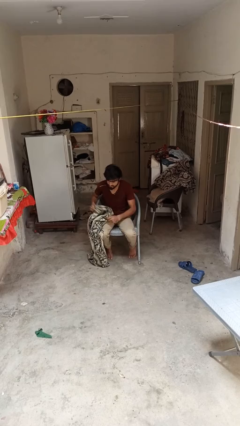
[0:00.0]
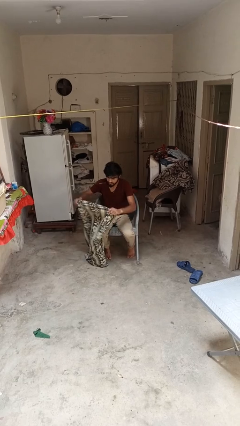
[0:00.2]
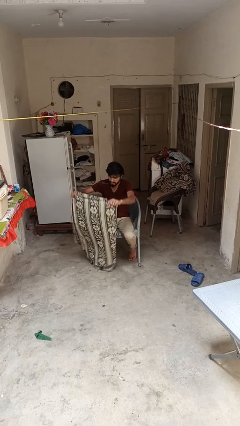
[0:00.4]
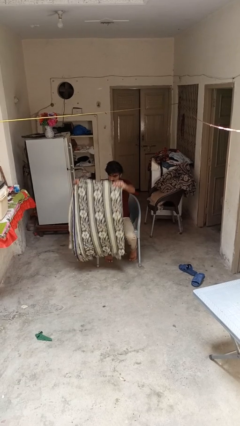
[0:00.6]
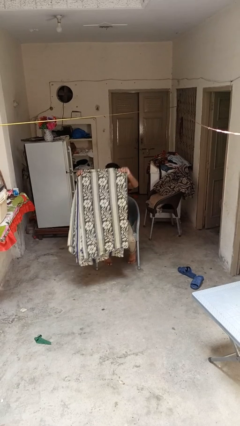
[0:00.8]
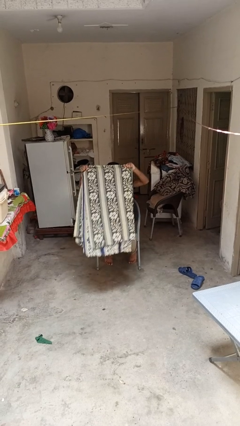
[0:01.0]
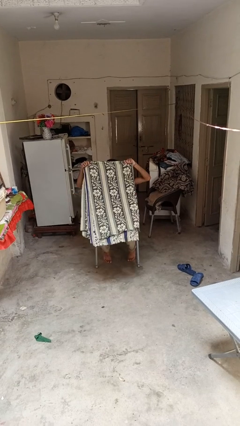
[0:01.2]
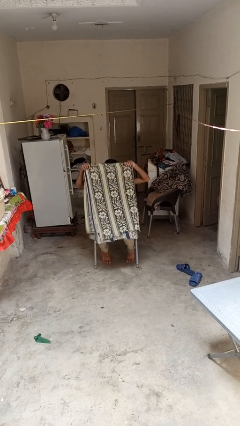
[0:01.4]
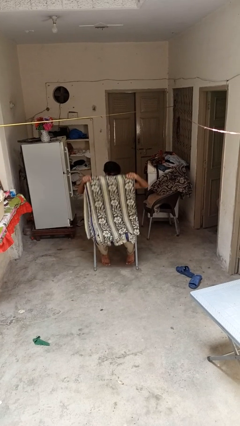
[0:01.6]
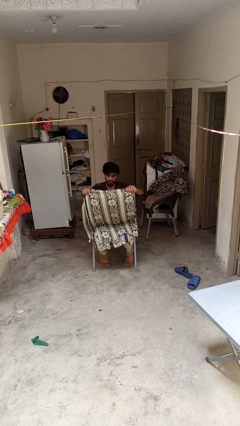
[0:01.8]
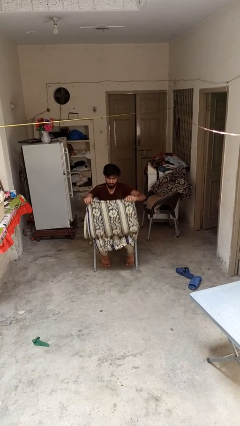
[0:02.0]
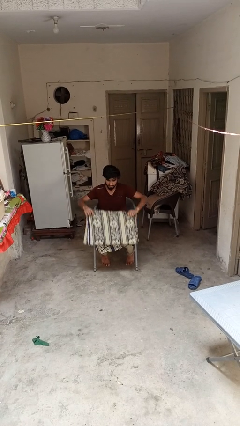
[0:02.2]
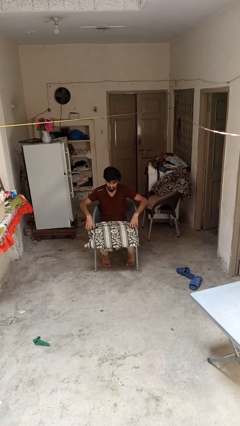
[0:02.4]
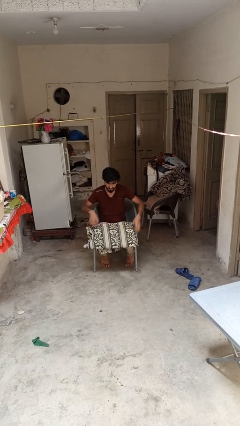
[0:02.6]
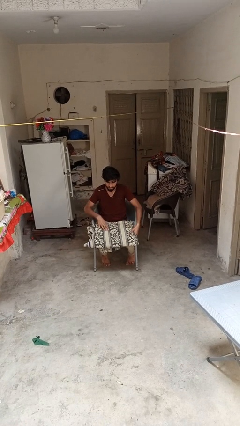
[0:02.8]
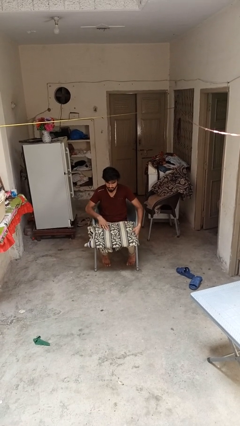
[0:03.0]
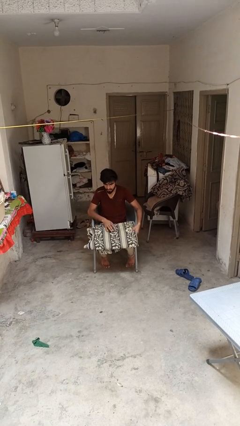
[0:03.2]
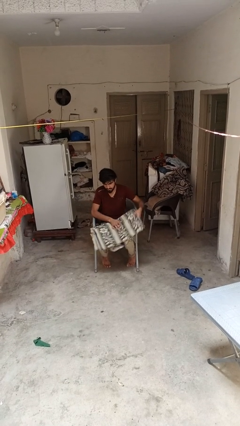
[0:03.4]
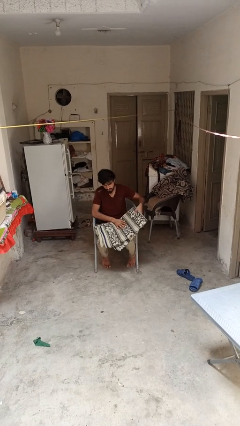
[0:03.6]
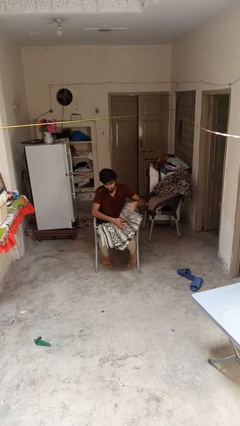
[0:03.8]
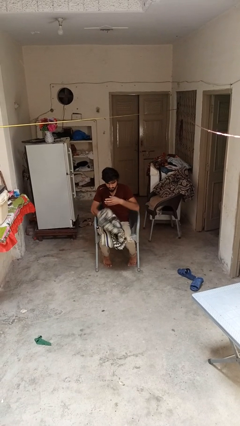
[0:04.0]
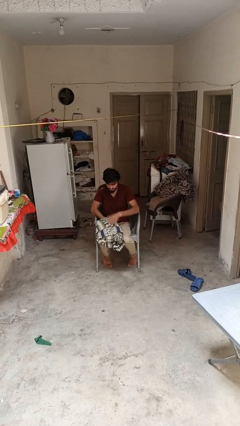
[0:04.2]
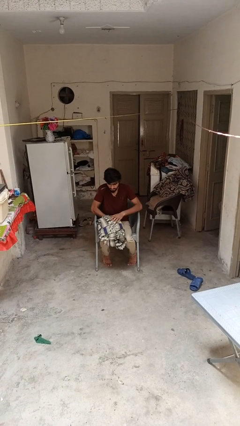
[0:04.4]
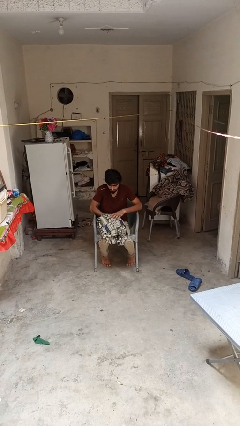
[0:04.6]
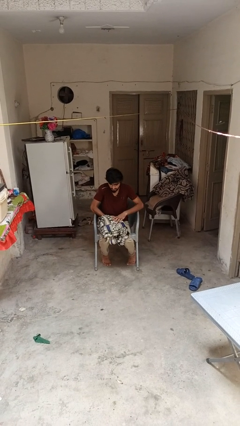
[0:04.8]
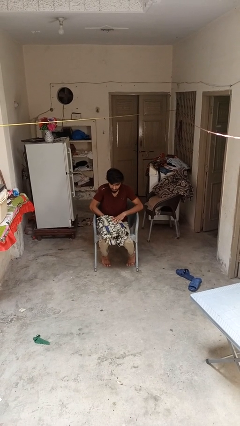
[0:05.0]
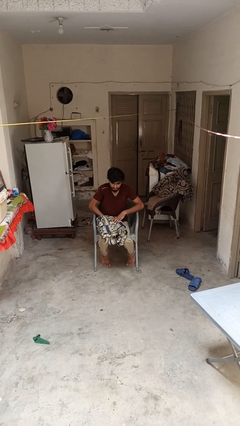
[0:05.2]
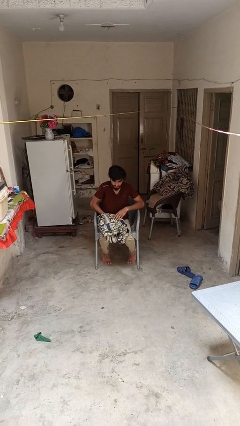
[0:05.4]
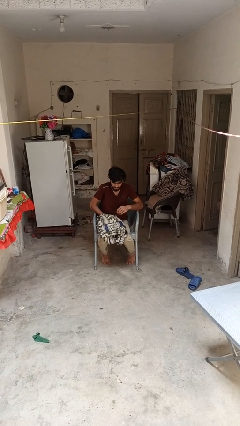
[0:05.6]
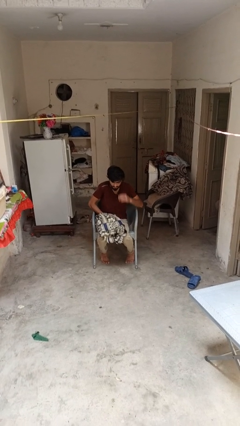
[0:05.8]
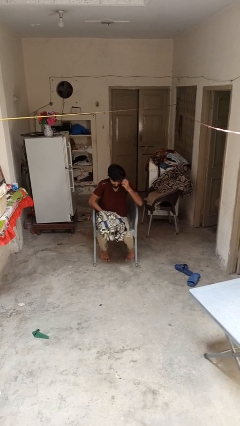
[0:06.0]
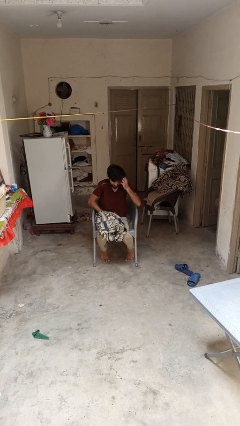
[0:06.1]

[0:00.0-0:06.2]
person folds blanket

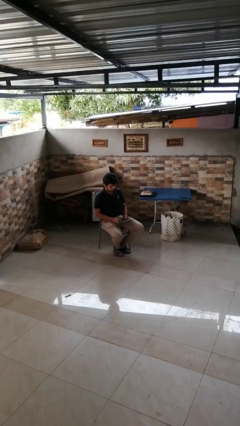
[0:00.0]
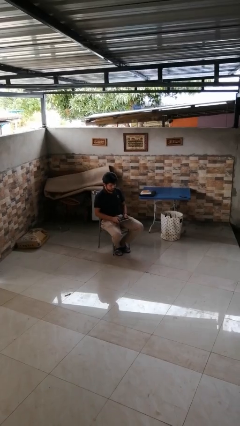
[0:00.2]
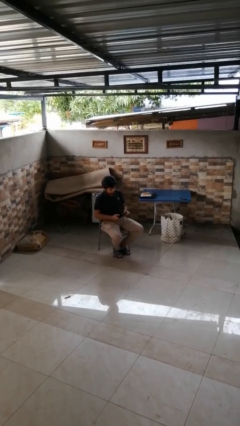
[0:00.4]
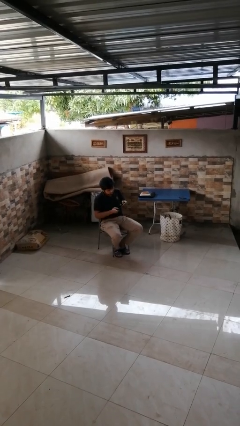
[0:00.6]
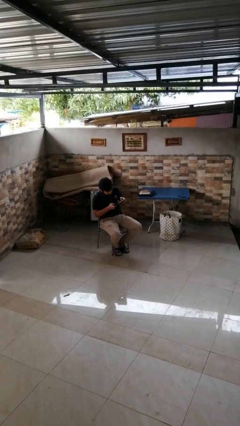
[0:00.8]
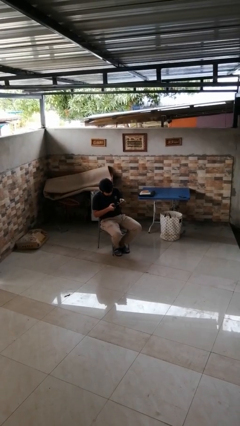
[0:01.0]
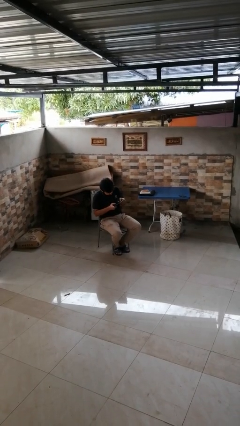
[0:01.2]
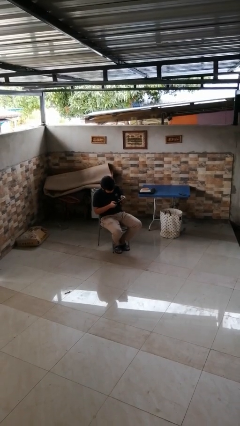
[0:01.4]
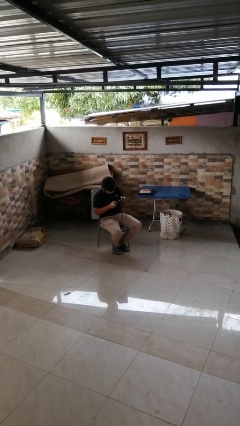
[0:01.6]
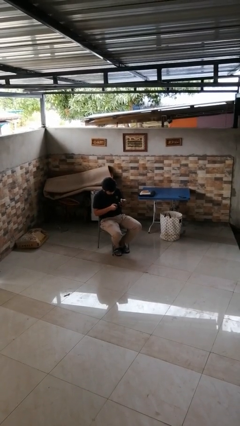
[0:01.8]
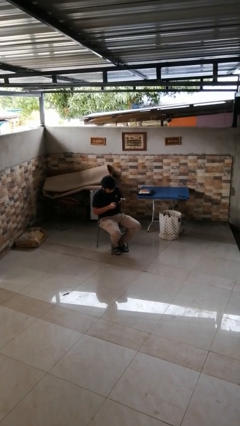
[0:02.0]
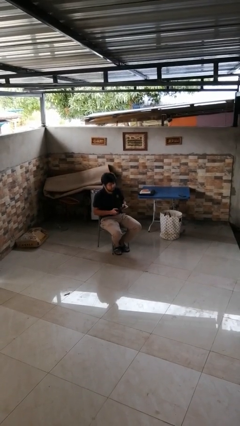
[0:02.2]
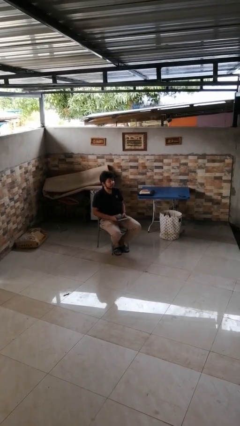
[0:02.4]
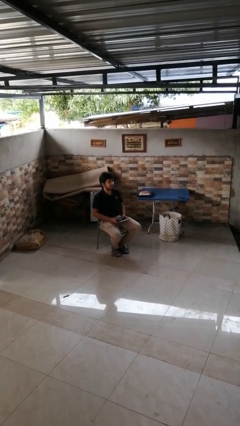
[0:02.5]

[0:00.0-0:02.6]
person interacts with handheld game

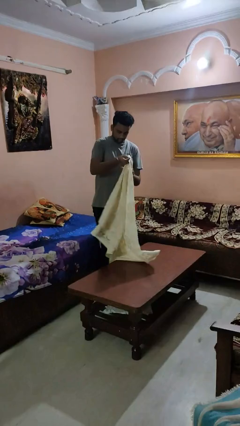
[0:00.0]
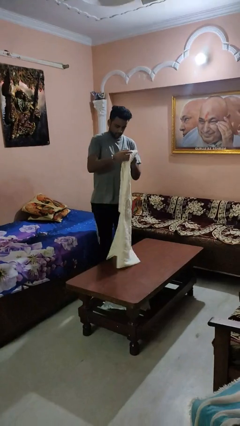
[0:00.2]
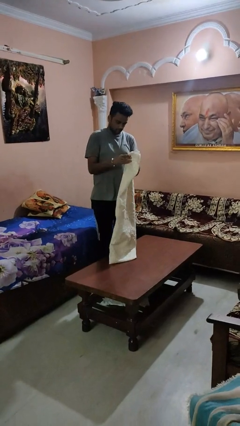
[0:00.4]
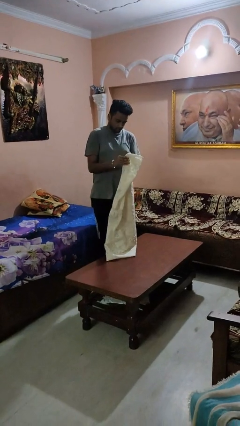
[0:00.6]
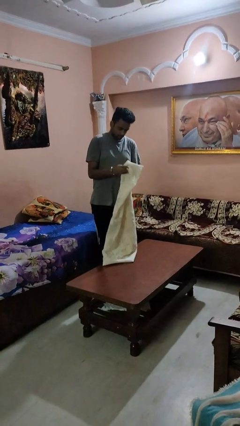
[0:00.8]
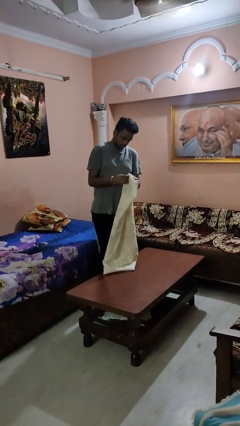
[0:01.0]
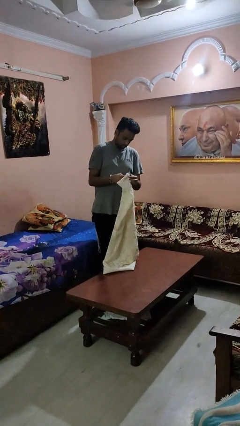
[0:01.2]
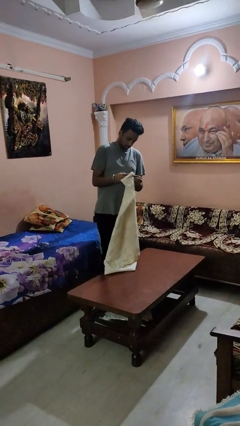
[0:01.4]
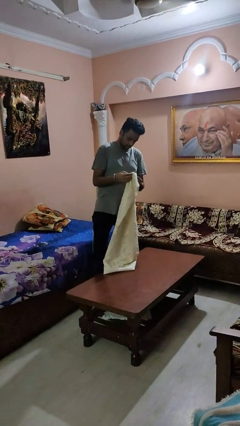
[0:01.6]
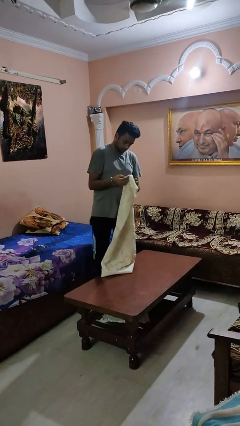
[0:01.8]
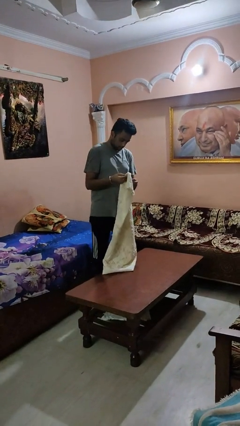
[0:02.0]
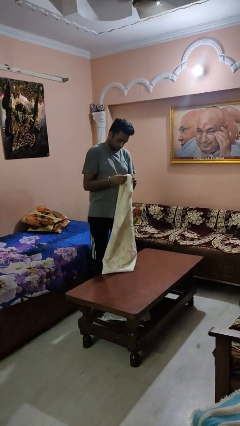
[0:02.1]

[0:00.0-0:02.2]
person spreads tablecloth

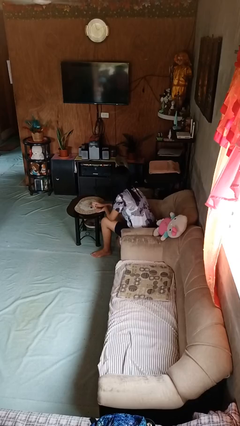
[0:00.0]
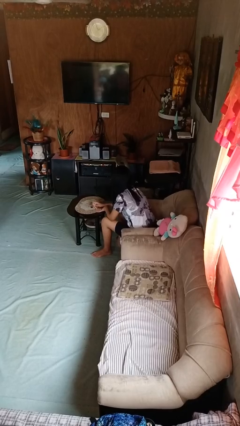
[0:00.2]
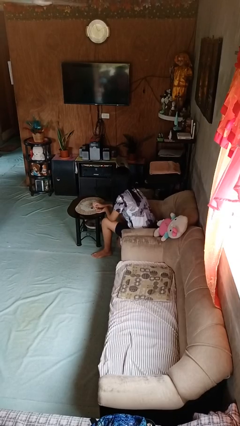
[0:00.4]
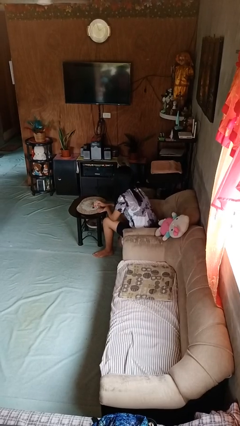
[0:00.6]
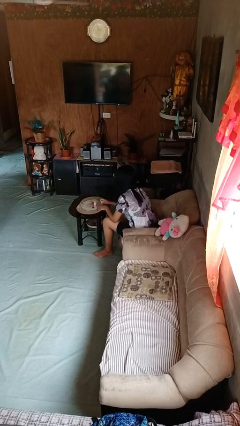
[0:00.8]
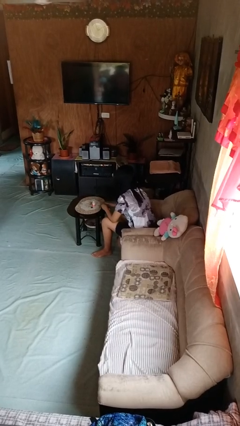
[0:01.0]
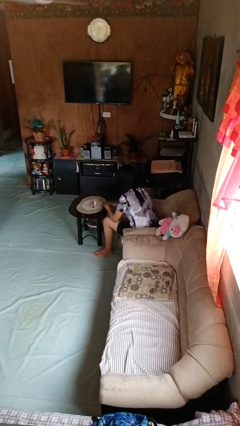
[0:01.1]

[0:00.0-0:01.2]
person paints fingernails

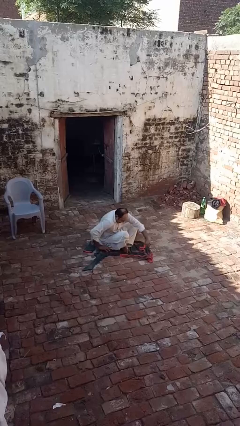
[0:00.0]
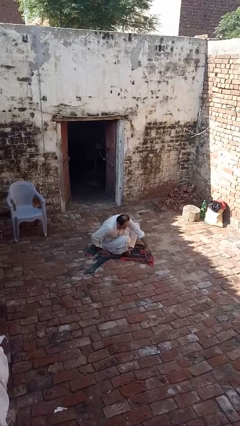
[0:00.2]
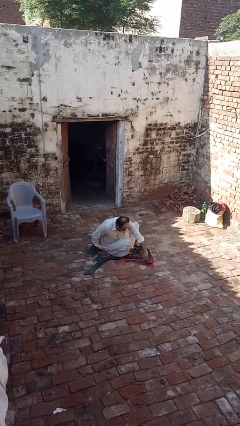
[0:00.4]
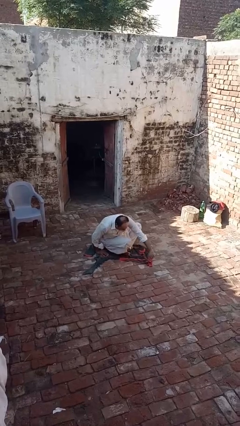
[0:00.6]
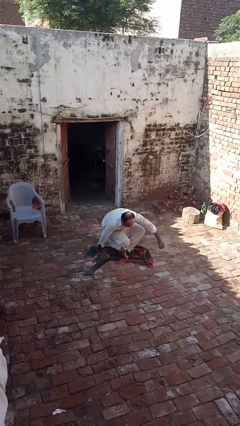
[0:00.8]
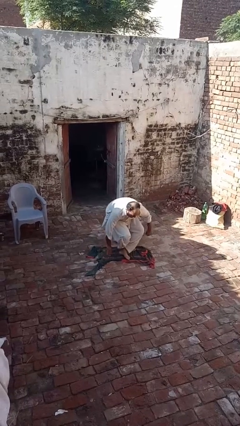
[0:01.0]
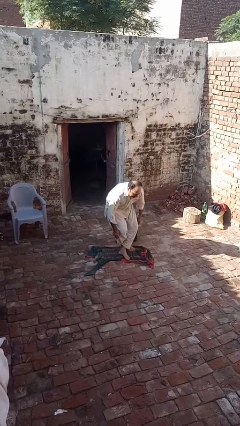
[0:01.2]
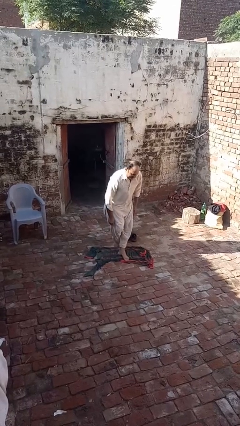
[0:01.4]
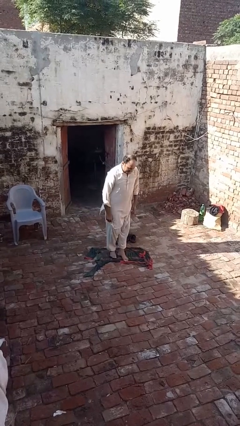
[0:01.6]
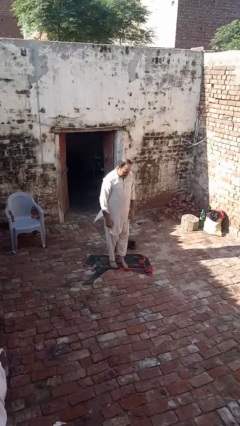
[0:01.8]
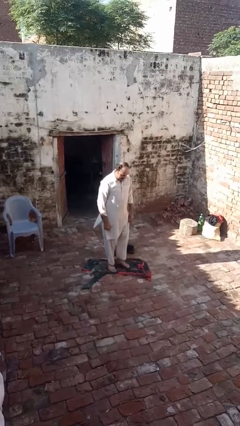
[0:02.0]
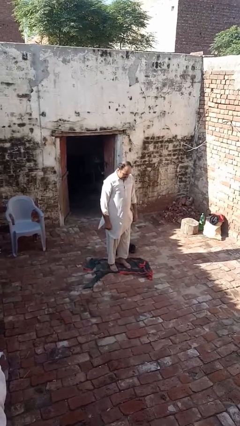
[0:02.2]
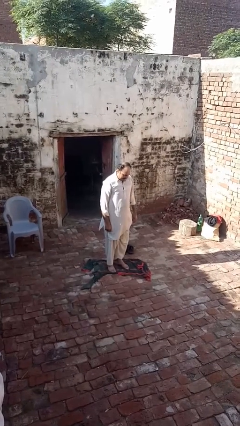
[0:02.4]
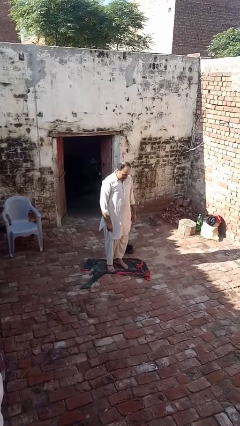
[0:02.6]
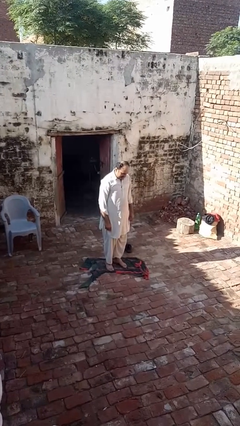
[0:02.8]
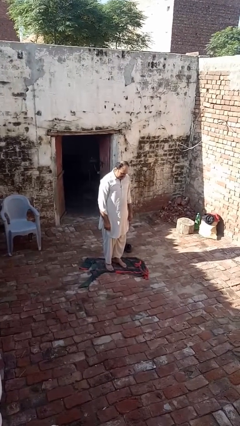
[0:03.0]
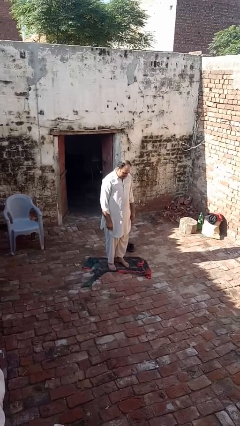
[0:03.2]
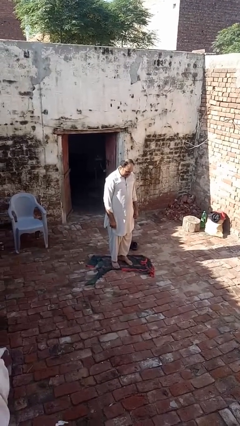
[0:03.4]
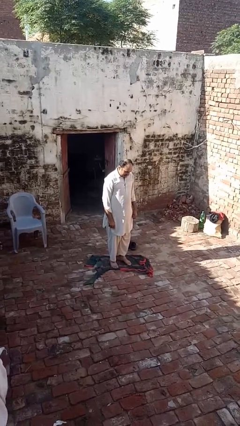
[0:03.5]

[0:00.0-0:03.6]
person stands up from floor

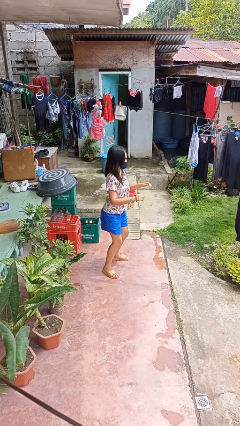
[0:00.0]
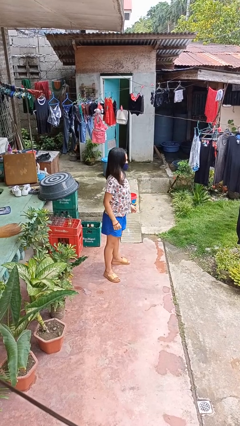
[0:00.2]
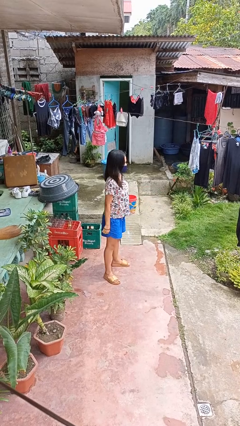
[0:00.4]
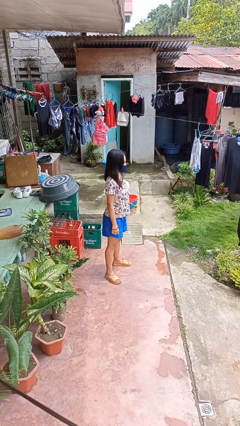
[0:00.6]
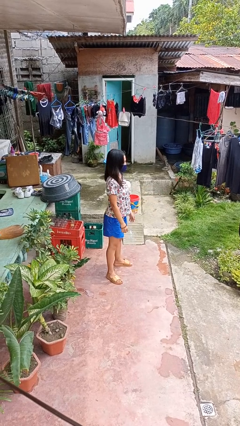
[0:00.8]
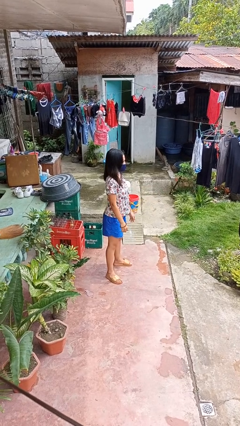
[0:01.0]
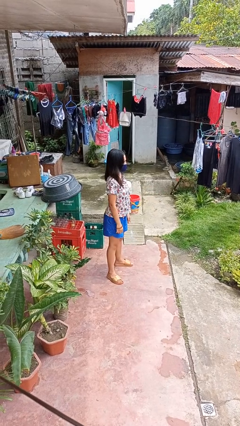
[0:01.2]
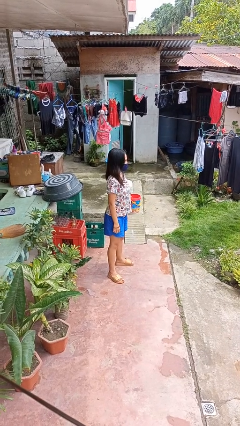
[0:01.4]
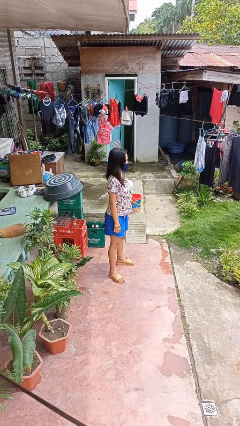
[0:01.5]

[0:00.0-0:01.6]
person stands up
